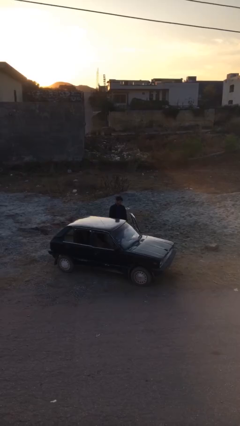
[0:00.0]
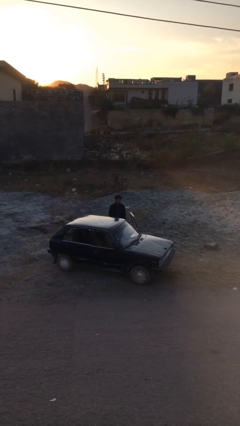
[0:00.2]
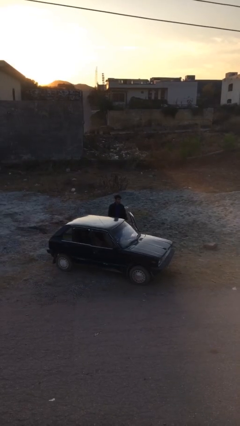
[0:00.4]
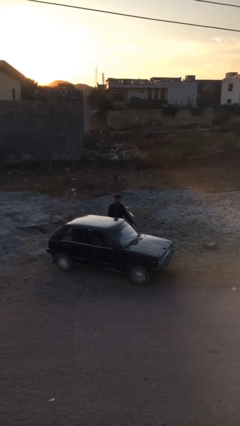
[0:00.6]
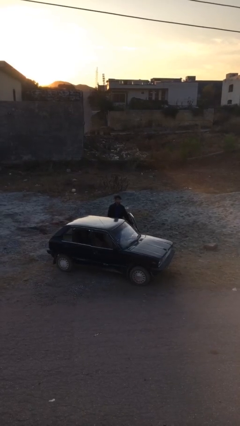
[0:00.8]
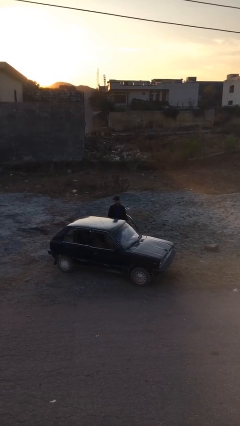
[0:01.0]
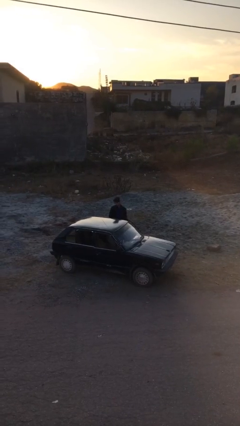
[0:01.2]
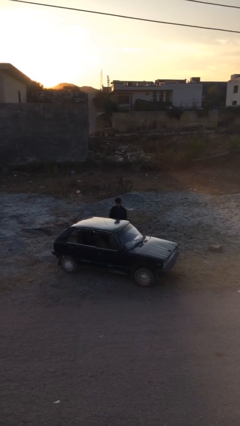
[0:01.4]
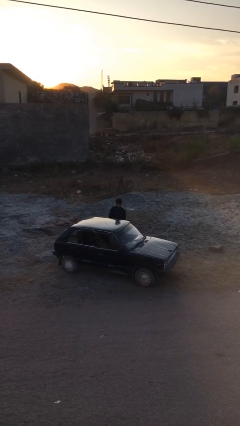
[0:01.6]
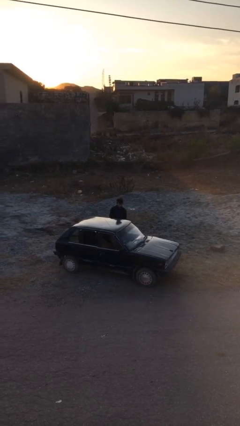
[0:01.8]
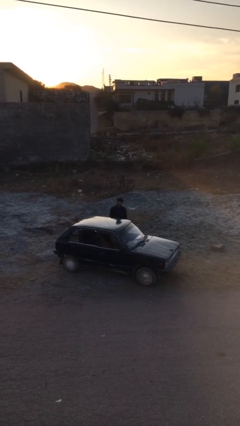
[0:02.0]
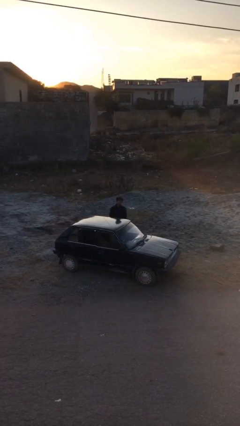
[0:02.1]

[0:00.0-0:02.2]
person closes car door

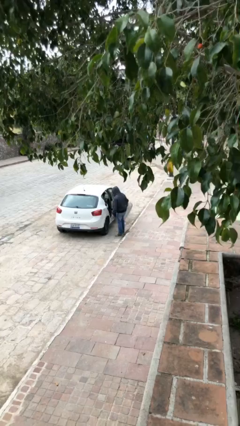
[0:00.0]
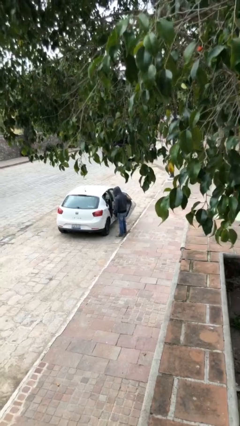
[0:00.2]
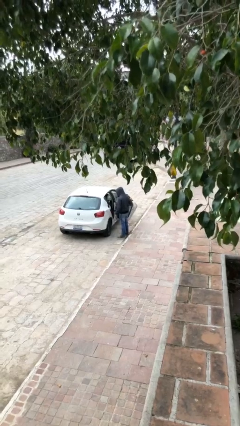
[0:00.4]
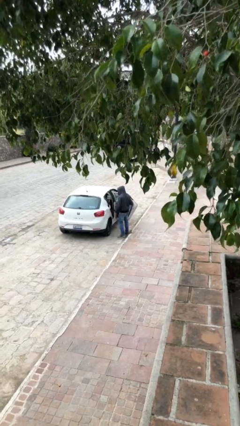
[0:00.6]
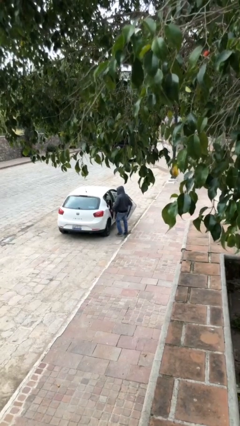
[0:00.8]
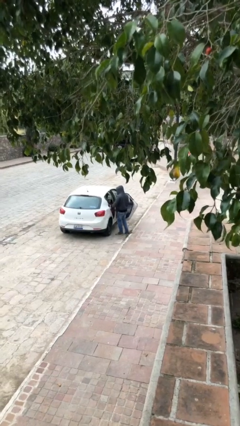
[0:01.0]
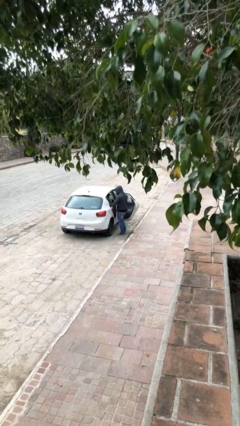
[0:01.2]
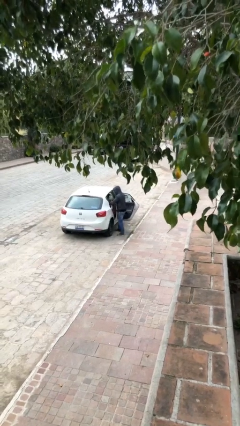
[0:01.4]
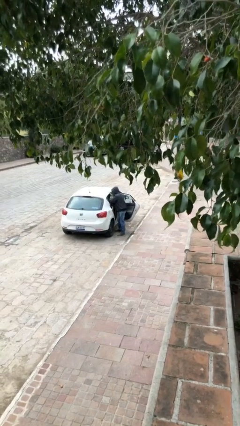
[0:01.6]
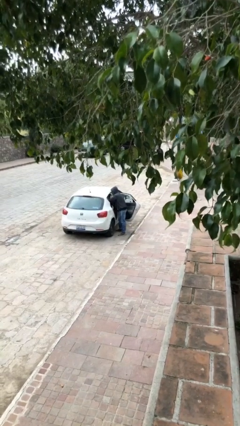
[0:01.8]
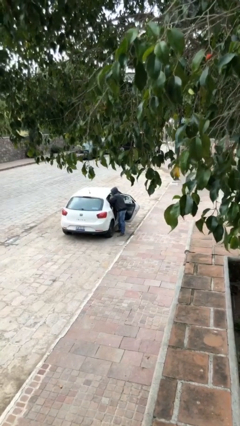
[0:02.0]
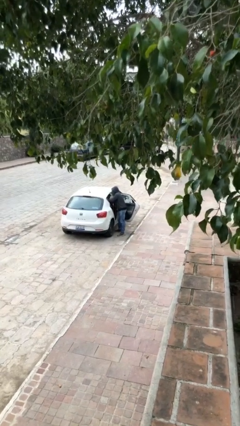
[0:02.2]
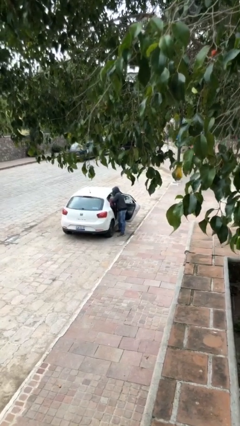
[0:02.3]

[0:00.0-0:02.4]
person unloads car

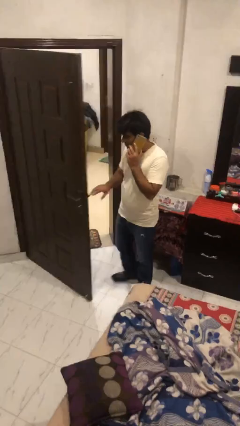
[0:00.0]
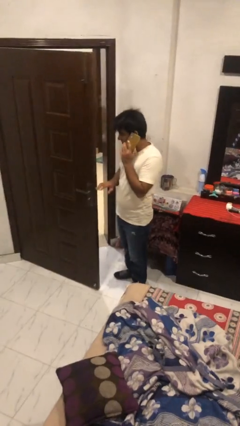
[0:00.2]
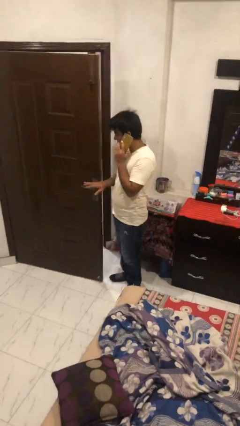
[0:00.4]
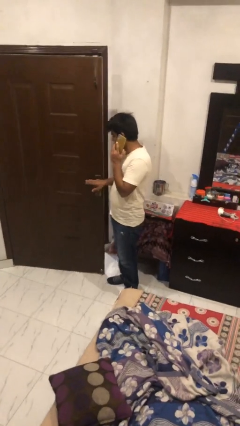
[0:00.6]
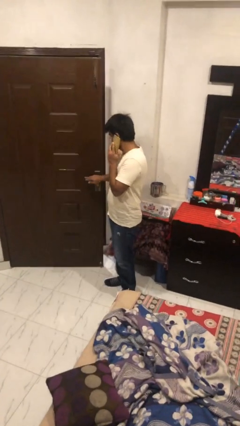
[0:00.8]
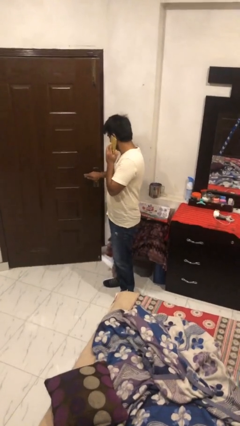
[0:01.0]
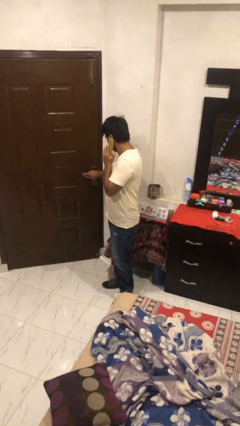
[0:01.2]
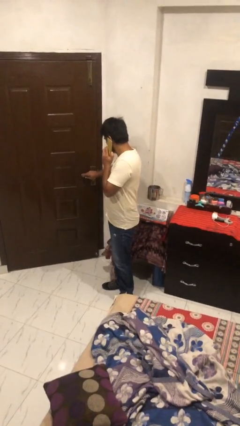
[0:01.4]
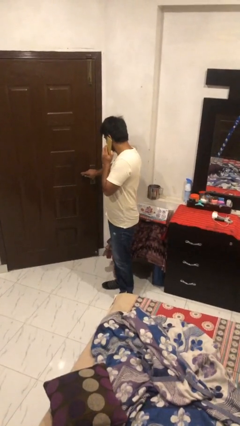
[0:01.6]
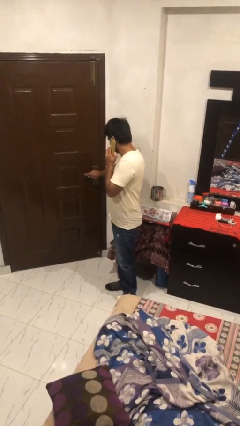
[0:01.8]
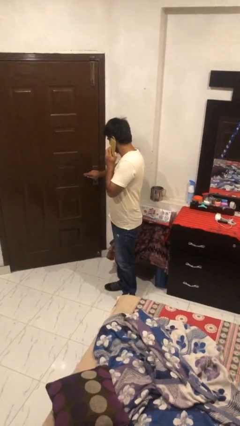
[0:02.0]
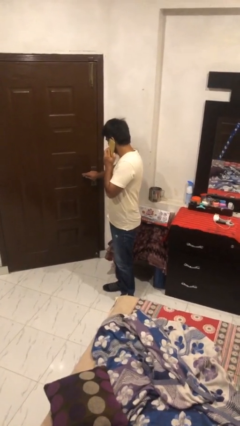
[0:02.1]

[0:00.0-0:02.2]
person closes facility door

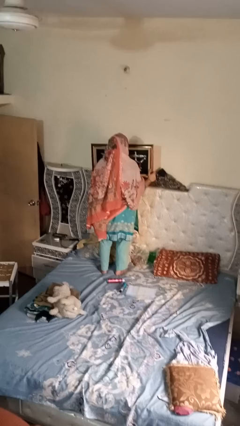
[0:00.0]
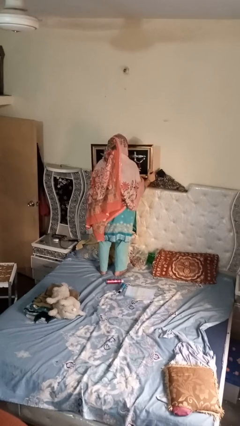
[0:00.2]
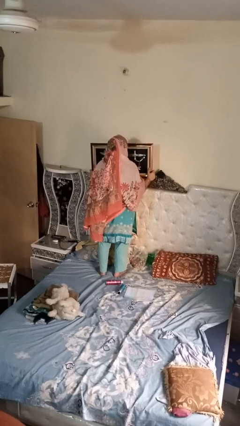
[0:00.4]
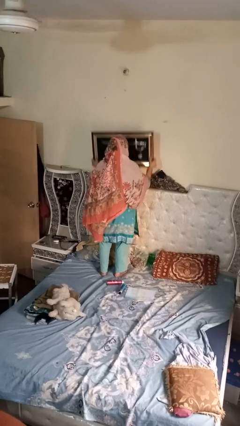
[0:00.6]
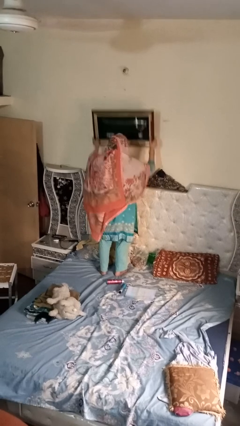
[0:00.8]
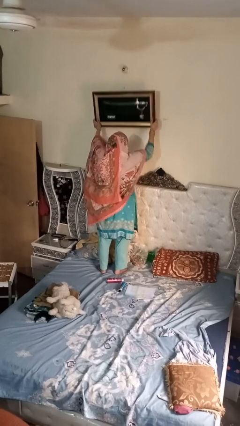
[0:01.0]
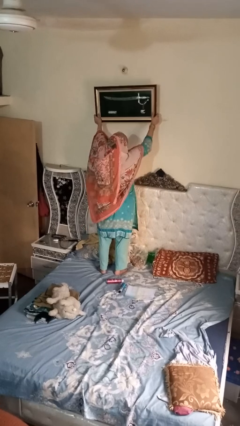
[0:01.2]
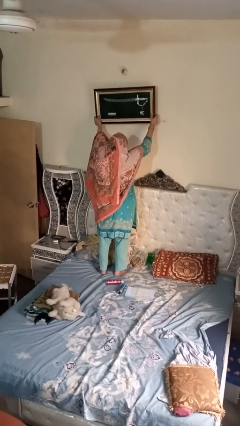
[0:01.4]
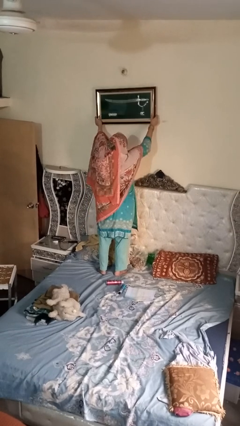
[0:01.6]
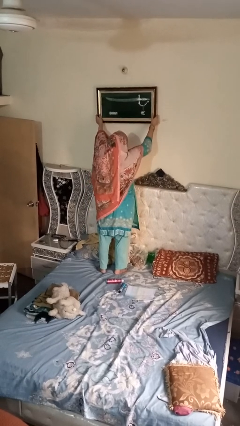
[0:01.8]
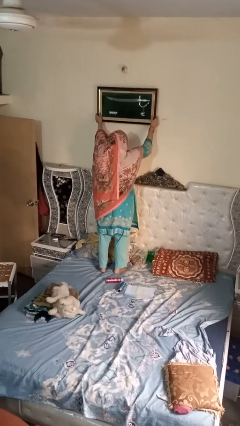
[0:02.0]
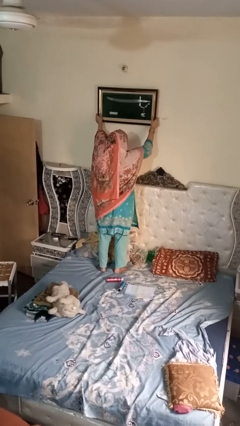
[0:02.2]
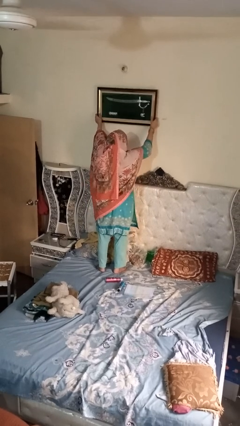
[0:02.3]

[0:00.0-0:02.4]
person takes down picture frame

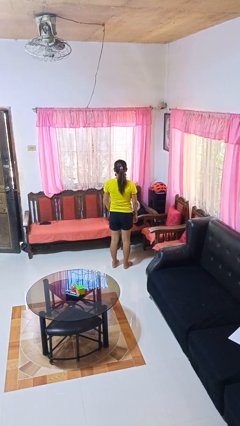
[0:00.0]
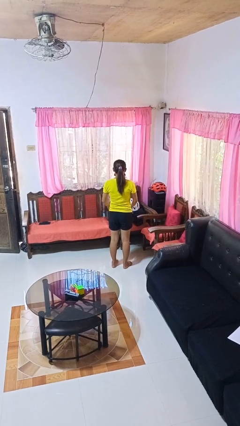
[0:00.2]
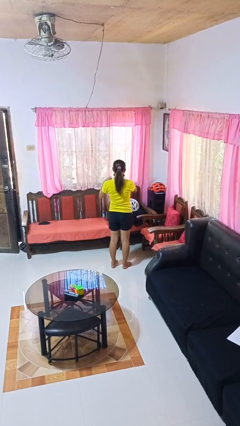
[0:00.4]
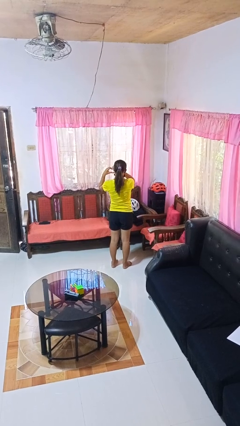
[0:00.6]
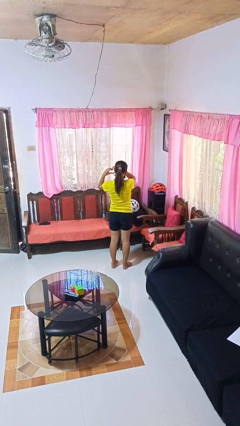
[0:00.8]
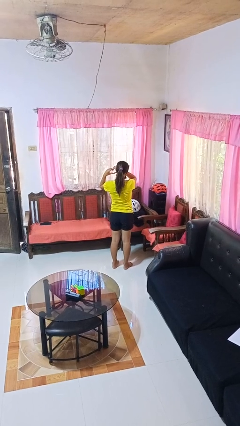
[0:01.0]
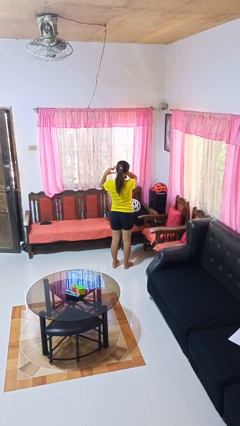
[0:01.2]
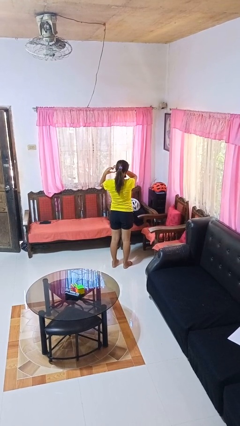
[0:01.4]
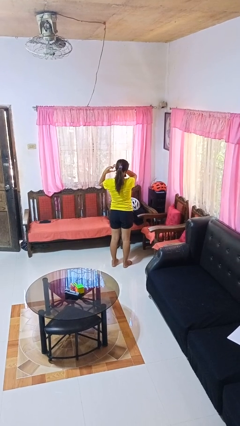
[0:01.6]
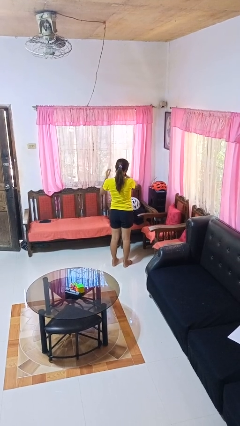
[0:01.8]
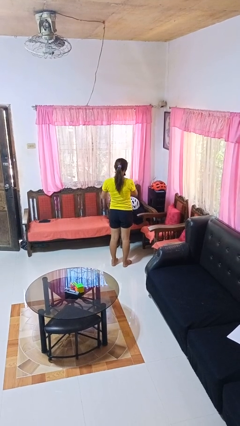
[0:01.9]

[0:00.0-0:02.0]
person gestures heart

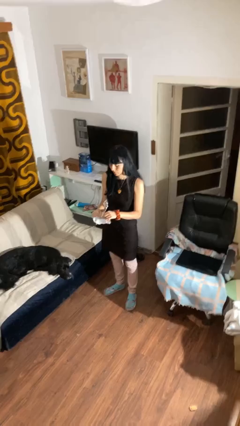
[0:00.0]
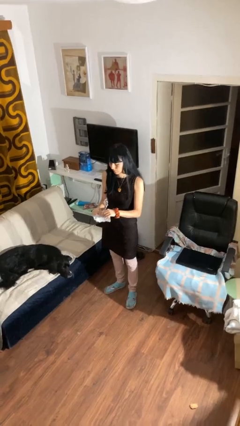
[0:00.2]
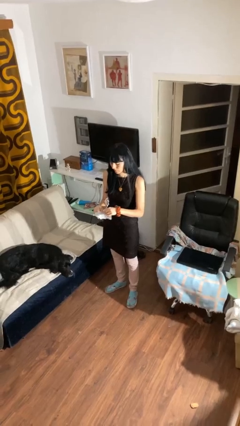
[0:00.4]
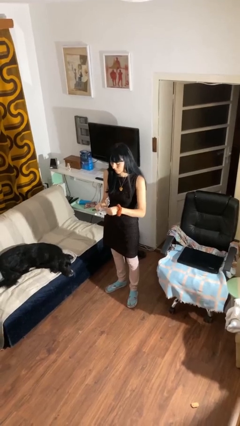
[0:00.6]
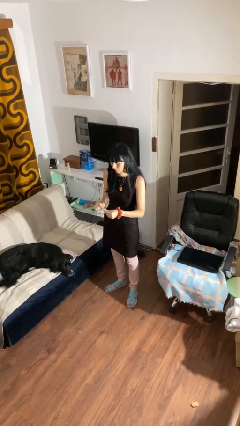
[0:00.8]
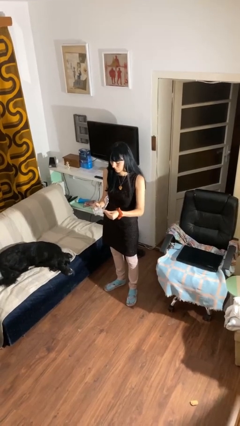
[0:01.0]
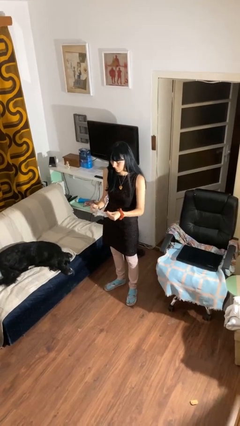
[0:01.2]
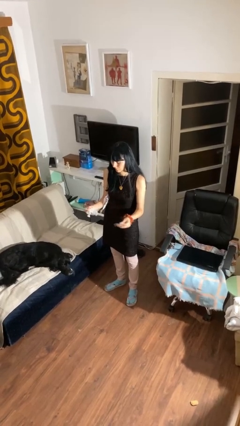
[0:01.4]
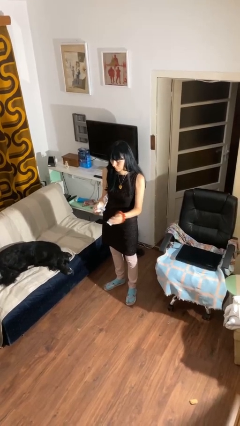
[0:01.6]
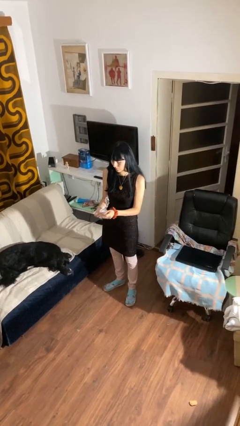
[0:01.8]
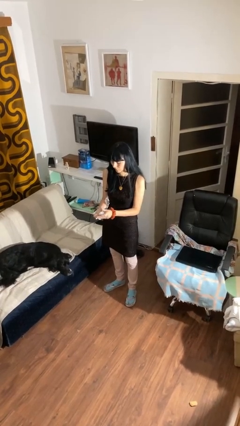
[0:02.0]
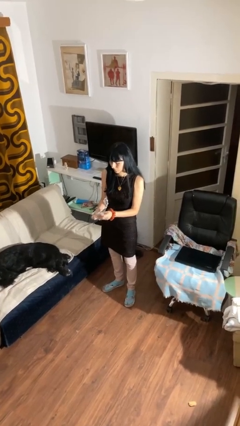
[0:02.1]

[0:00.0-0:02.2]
person tears paper

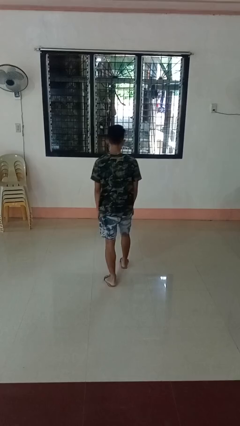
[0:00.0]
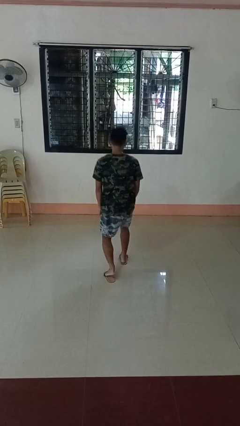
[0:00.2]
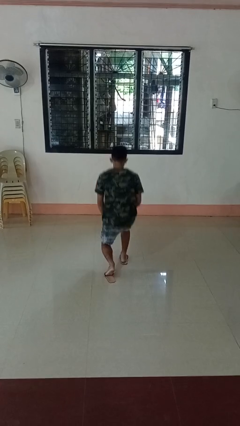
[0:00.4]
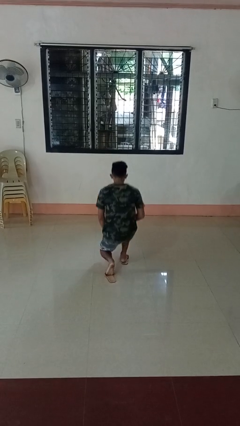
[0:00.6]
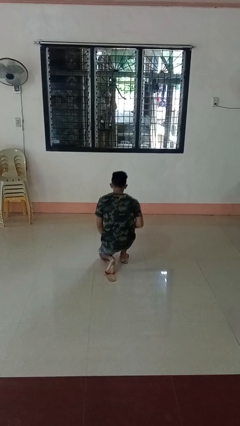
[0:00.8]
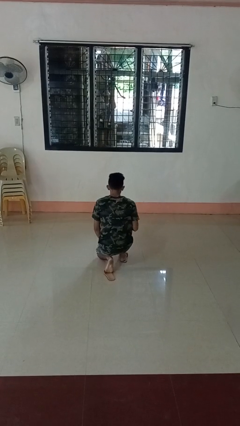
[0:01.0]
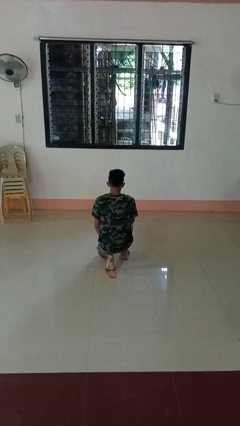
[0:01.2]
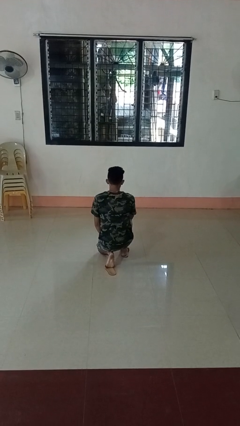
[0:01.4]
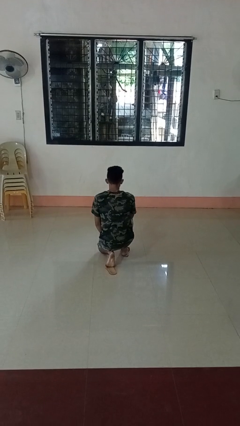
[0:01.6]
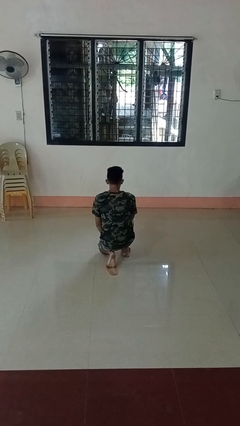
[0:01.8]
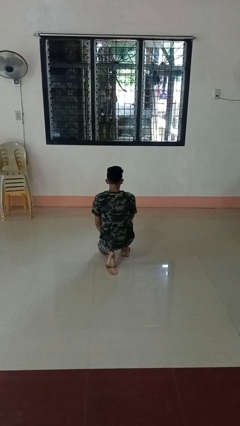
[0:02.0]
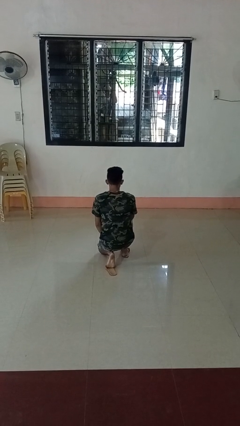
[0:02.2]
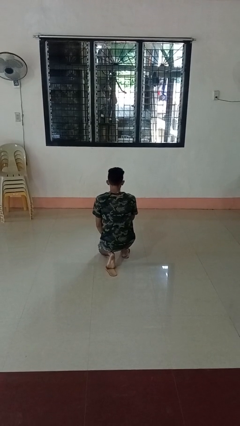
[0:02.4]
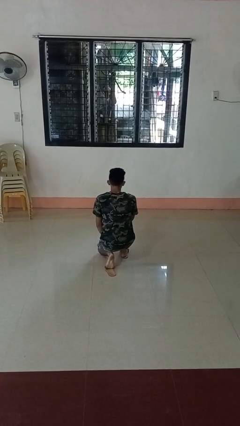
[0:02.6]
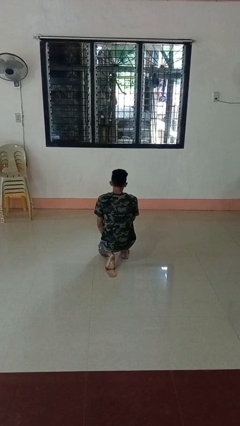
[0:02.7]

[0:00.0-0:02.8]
person kneels

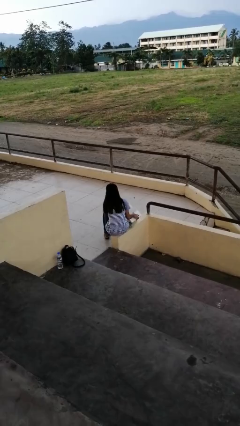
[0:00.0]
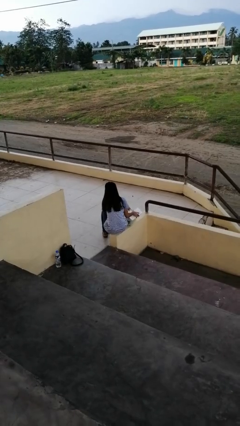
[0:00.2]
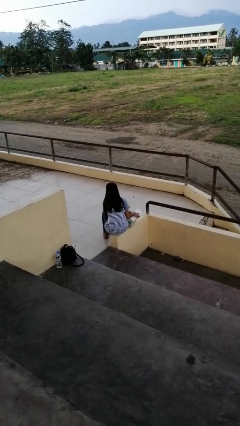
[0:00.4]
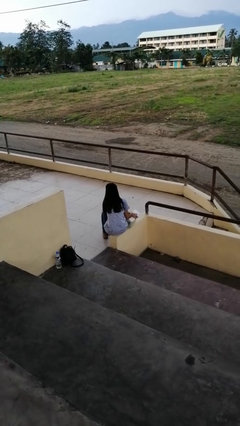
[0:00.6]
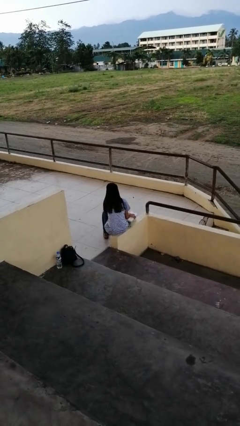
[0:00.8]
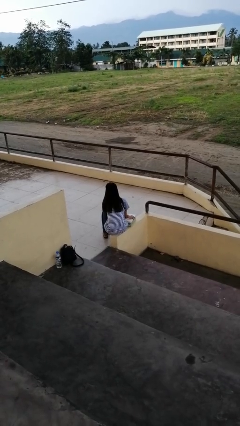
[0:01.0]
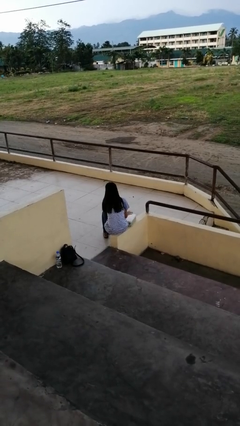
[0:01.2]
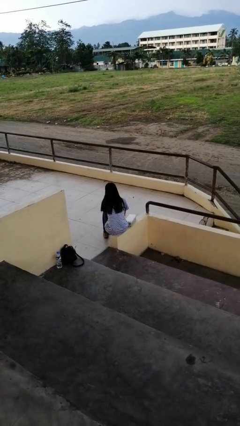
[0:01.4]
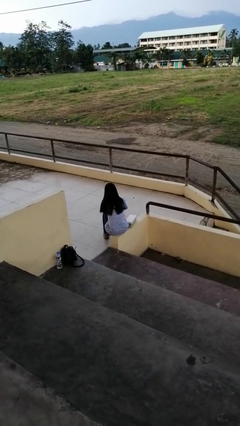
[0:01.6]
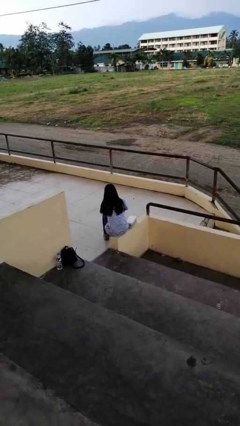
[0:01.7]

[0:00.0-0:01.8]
person puts object into box
